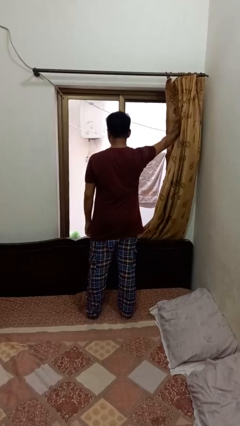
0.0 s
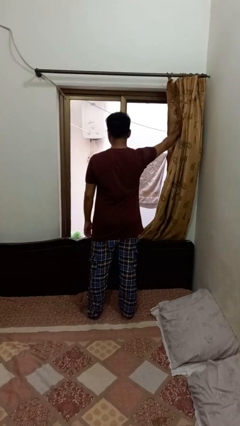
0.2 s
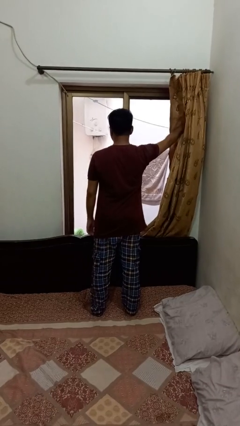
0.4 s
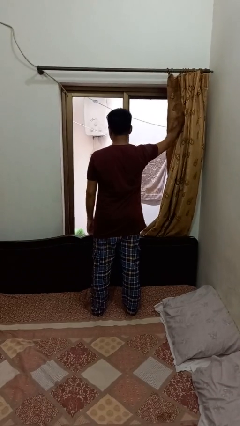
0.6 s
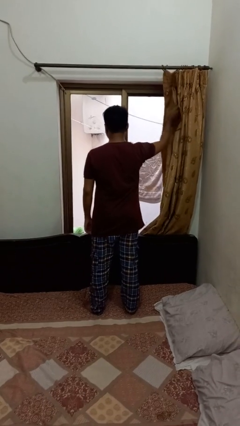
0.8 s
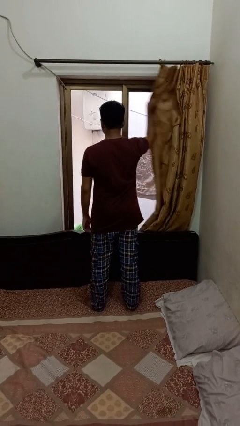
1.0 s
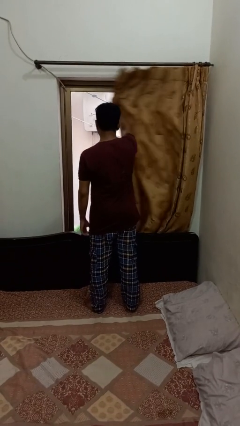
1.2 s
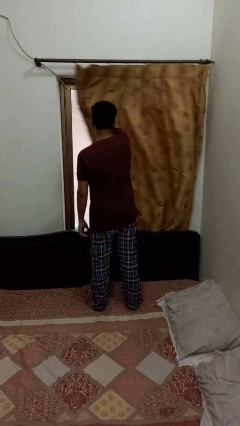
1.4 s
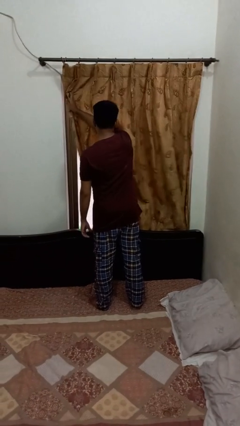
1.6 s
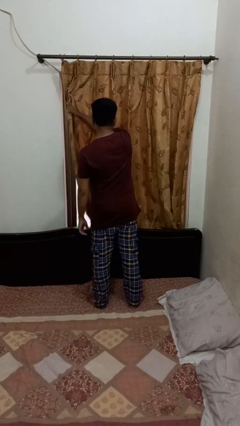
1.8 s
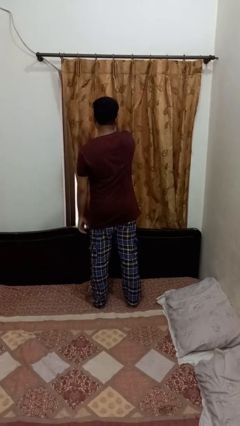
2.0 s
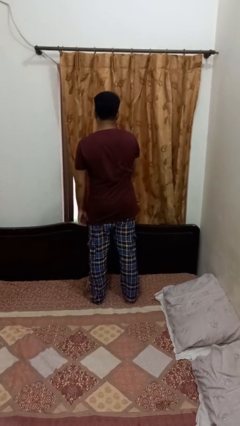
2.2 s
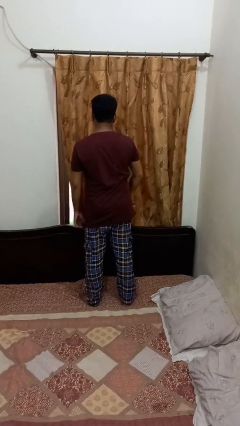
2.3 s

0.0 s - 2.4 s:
person closes curtains

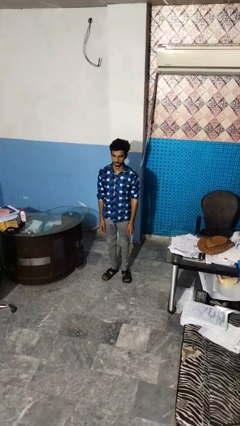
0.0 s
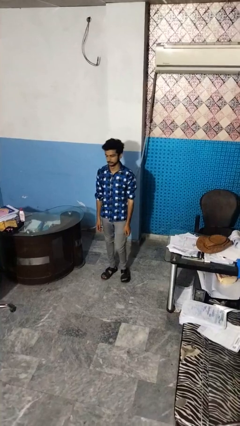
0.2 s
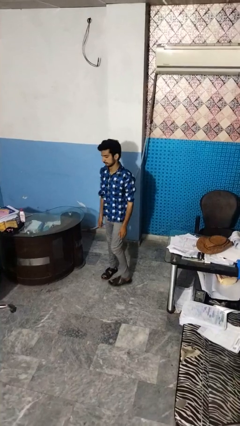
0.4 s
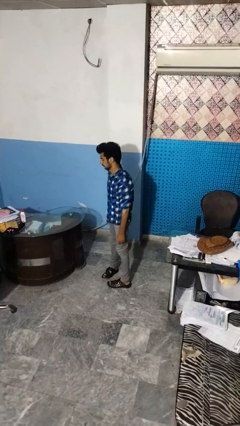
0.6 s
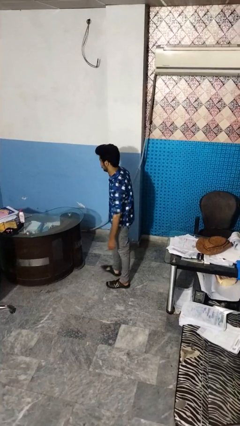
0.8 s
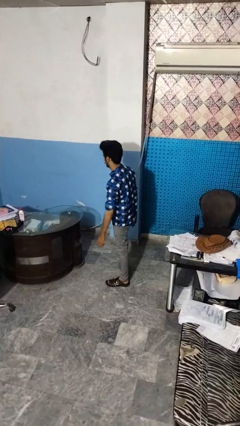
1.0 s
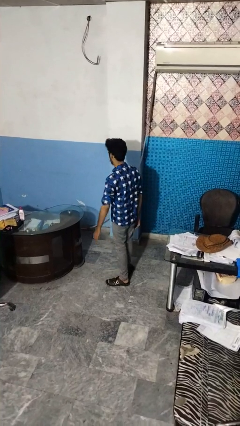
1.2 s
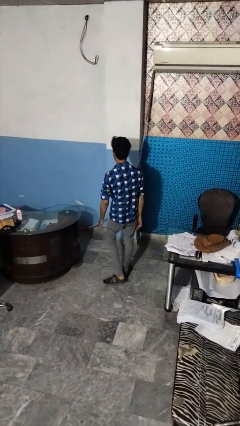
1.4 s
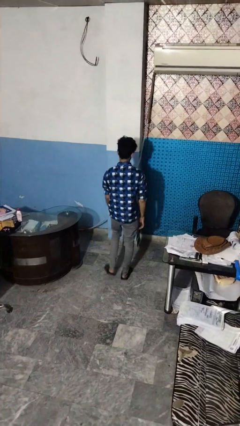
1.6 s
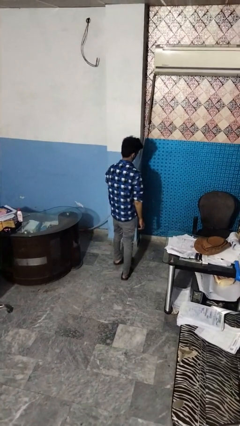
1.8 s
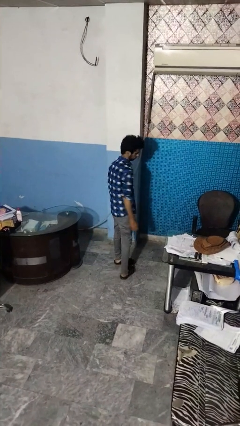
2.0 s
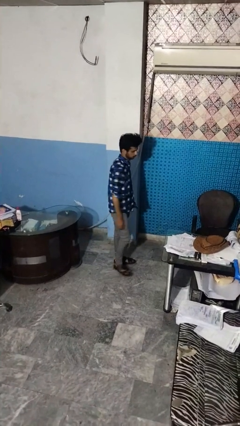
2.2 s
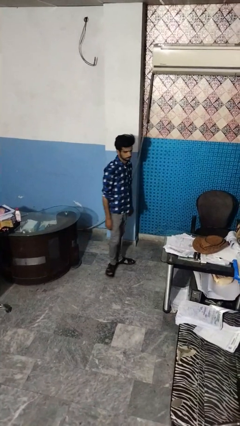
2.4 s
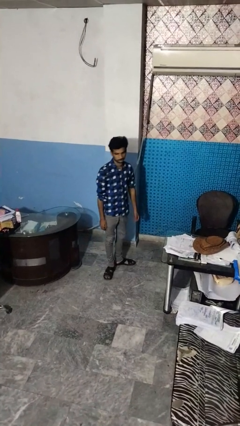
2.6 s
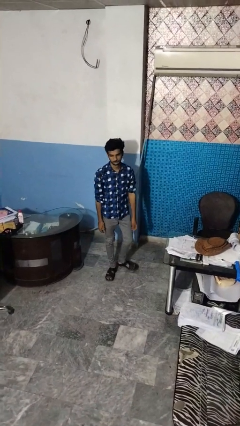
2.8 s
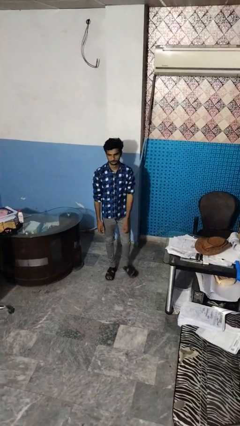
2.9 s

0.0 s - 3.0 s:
person twirls

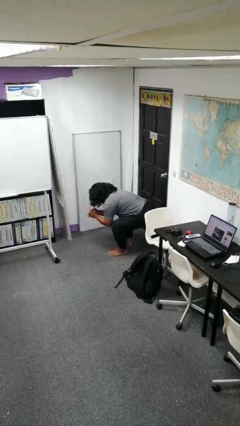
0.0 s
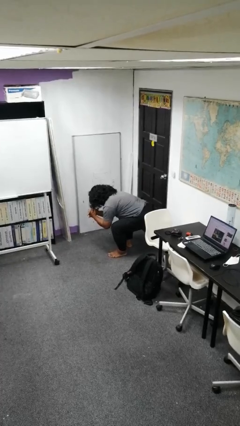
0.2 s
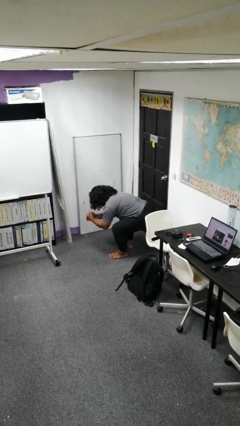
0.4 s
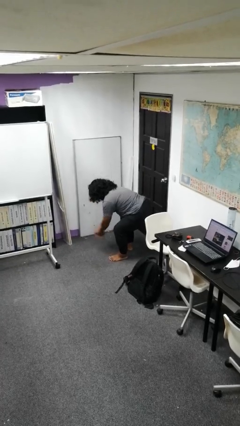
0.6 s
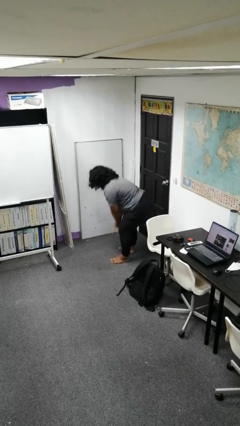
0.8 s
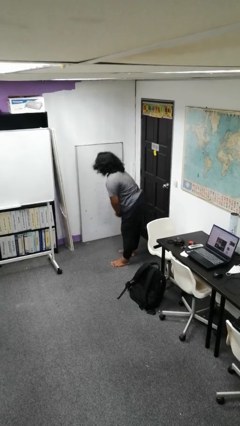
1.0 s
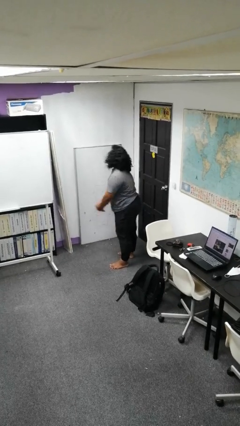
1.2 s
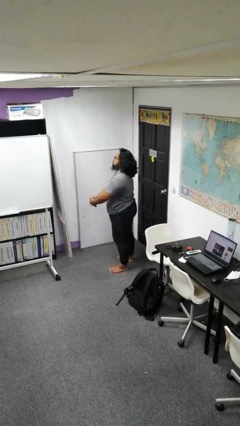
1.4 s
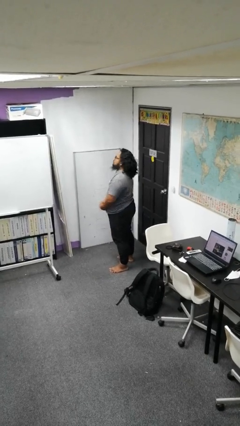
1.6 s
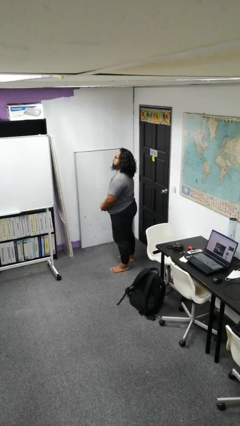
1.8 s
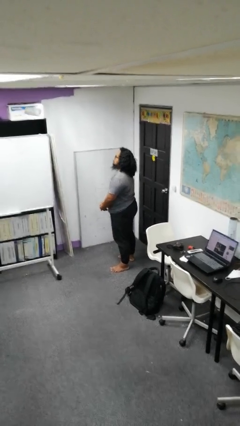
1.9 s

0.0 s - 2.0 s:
person stands up

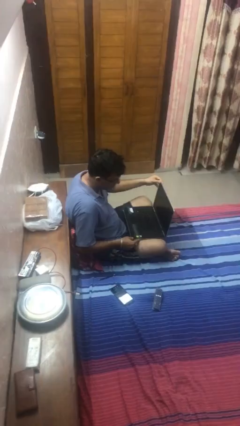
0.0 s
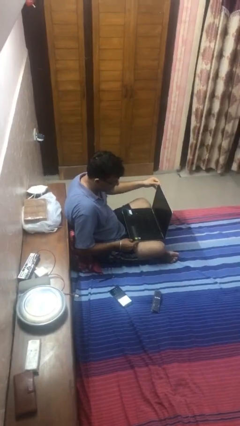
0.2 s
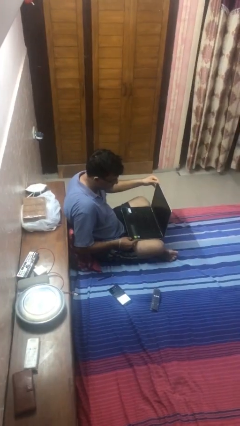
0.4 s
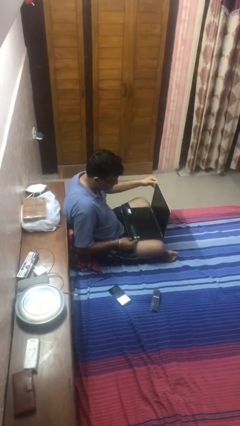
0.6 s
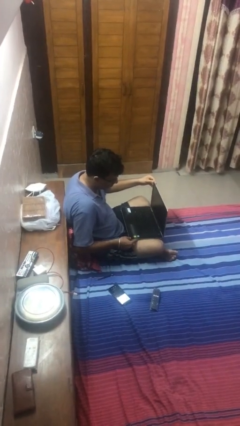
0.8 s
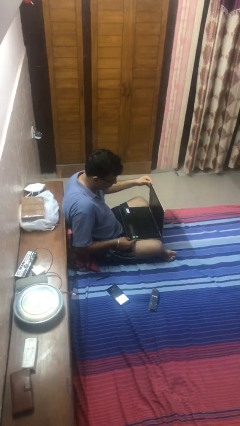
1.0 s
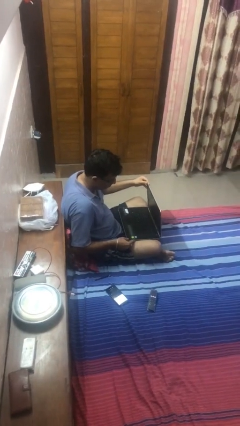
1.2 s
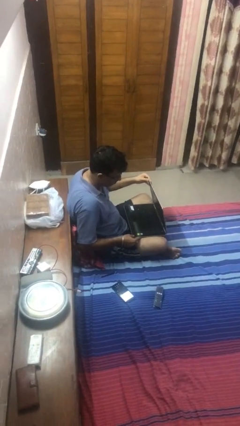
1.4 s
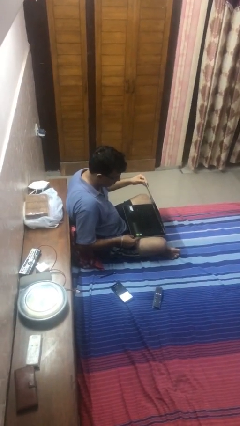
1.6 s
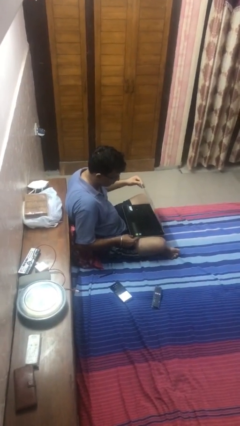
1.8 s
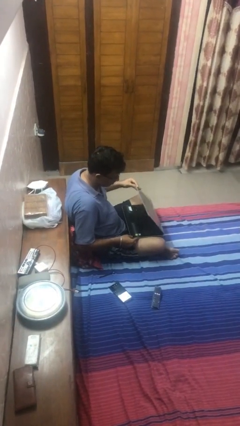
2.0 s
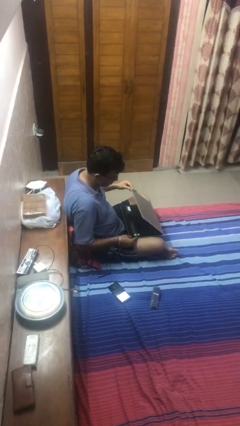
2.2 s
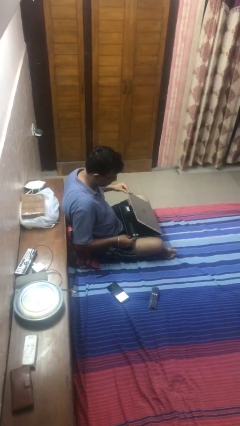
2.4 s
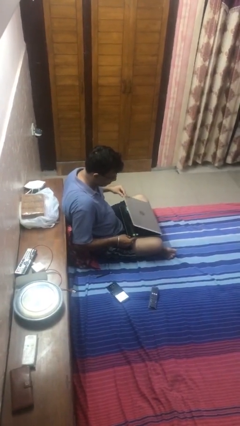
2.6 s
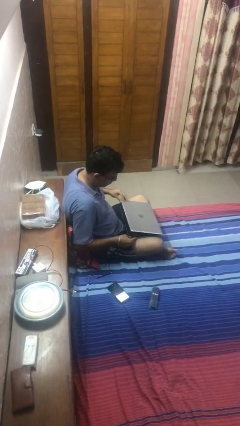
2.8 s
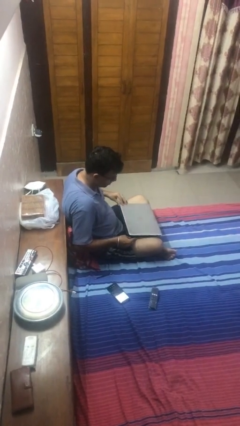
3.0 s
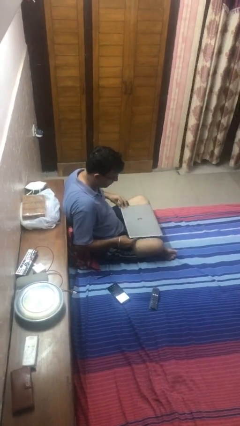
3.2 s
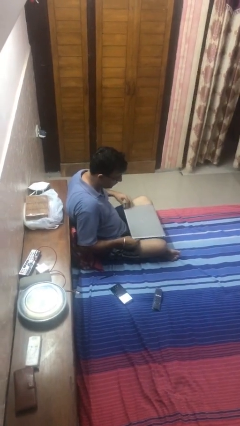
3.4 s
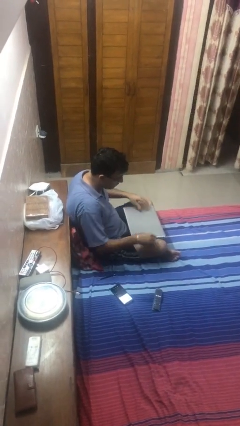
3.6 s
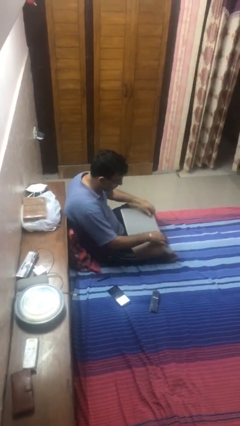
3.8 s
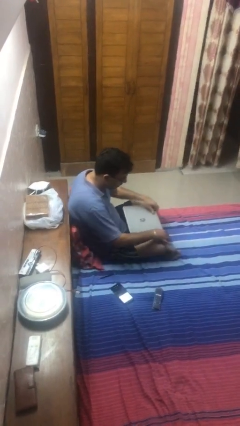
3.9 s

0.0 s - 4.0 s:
person closes laptop

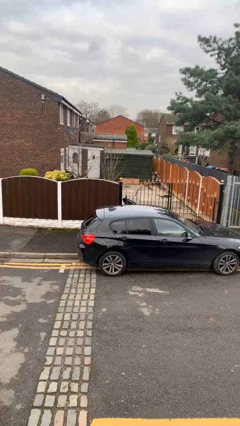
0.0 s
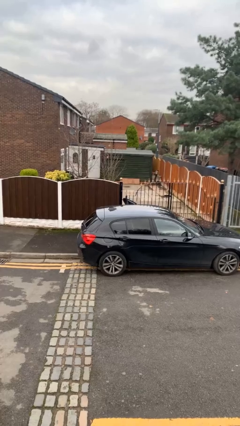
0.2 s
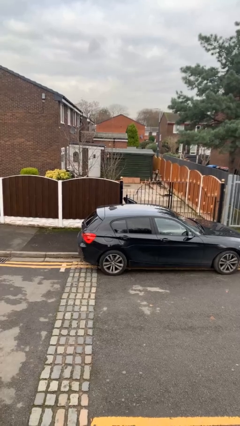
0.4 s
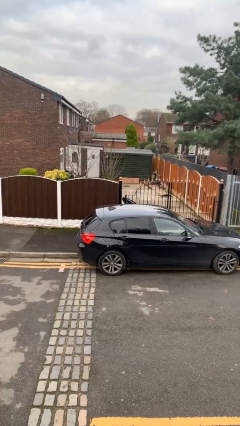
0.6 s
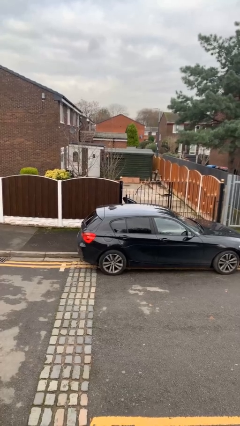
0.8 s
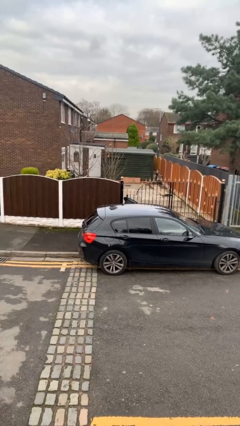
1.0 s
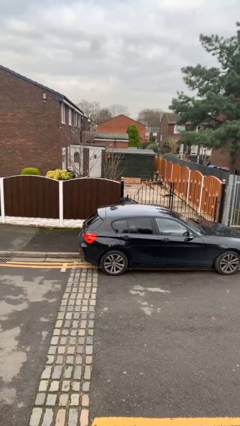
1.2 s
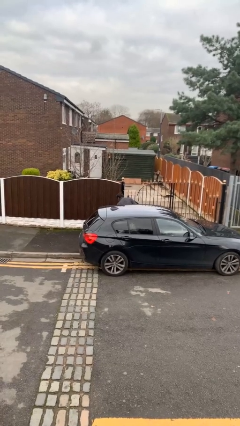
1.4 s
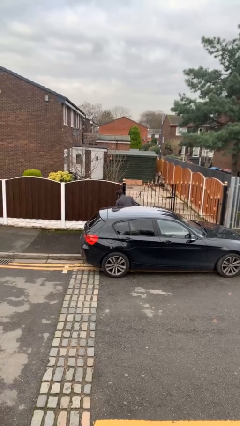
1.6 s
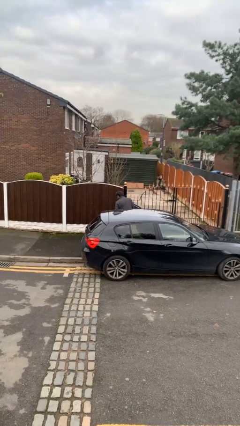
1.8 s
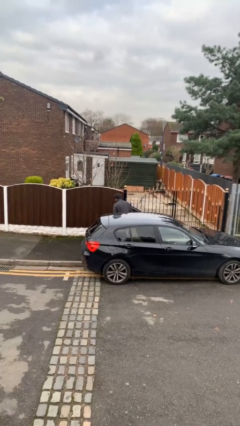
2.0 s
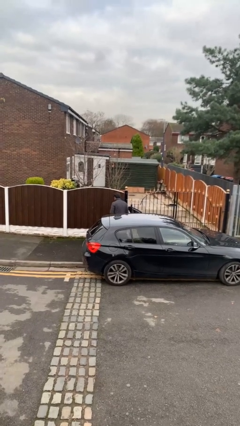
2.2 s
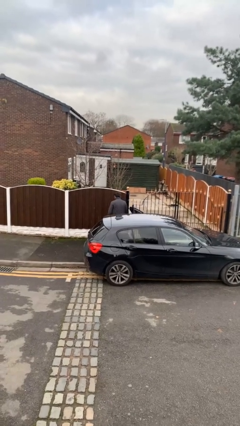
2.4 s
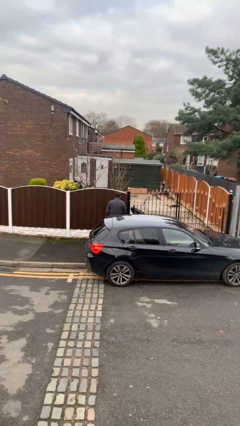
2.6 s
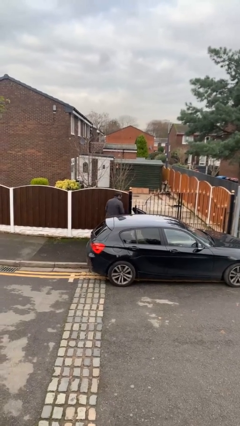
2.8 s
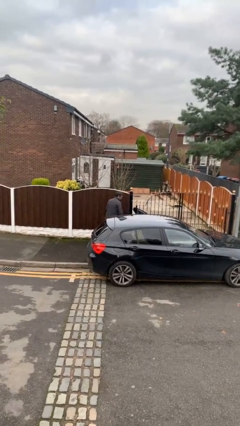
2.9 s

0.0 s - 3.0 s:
person exits car

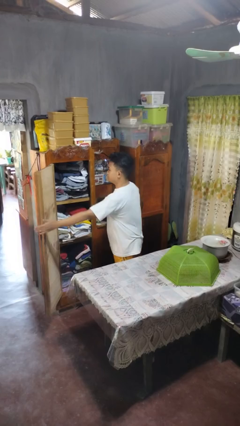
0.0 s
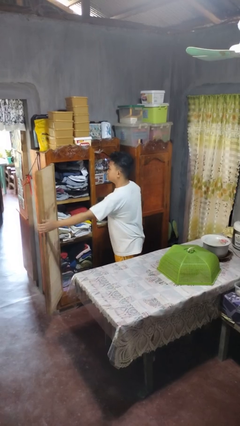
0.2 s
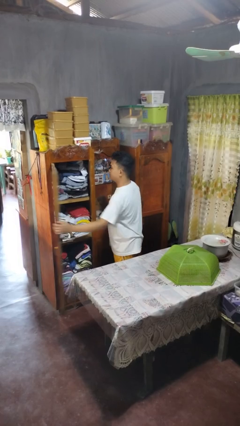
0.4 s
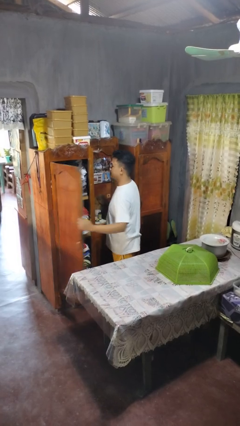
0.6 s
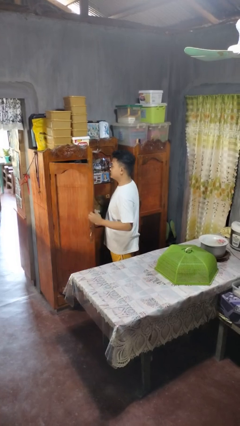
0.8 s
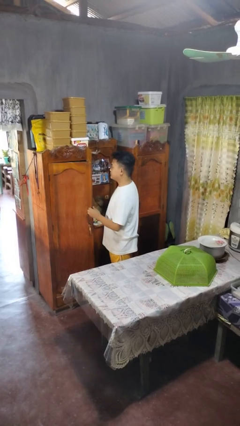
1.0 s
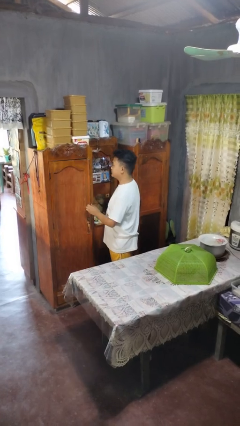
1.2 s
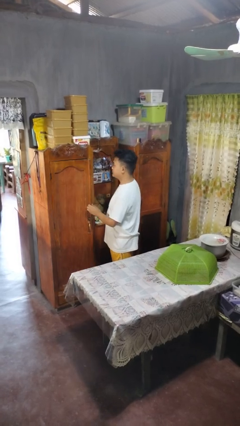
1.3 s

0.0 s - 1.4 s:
person closes closet door

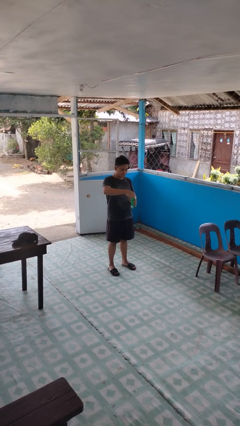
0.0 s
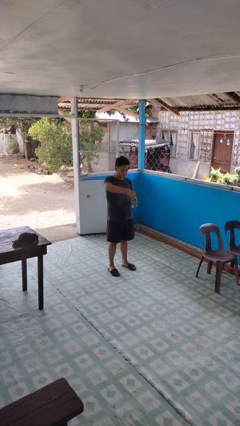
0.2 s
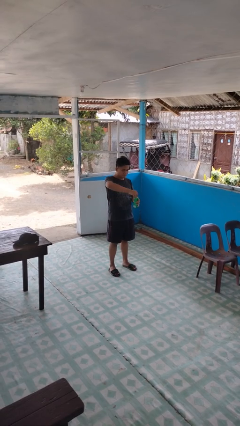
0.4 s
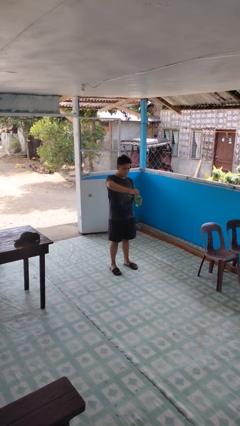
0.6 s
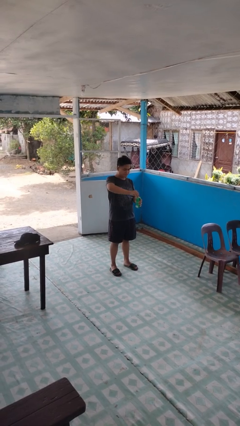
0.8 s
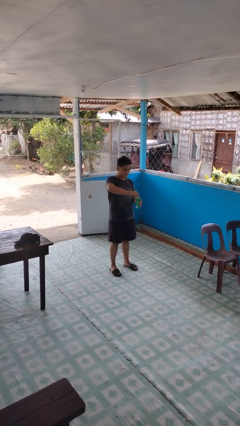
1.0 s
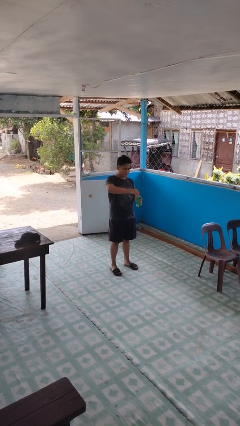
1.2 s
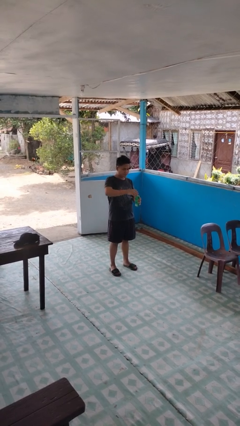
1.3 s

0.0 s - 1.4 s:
person opens beverage can
